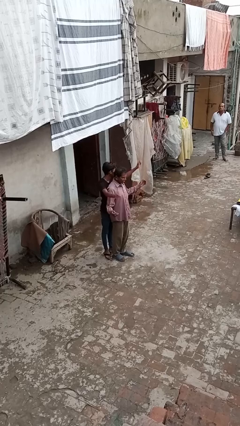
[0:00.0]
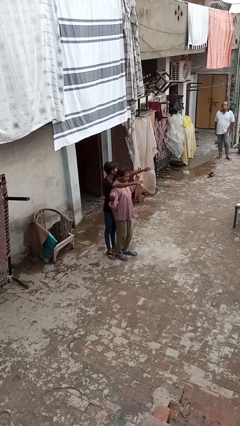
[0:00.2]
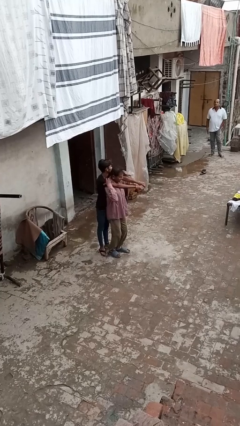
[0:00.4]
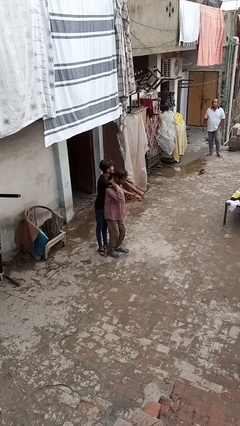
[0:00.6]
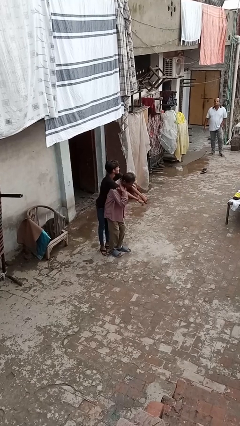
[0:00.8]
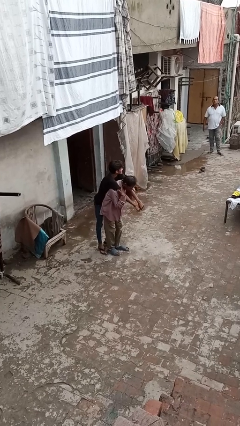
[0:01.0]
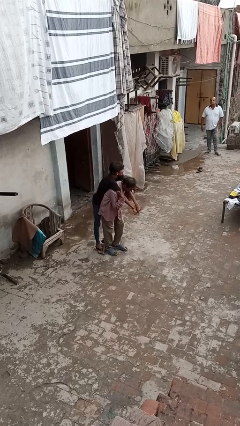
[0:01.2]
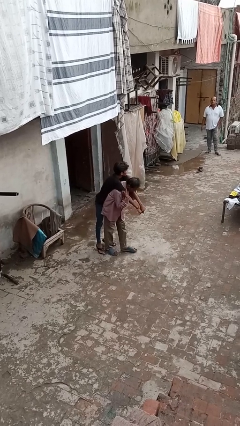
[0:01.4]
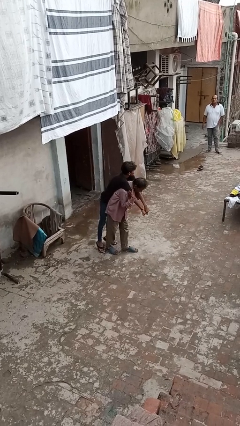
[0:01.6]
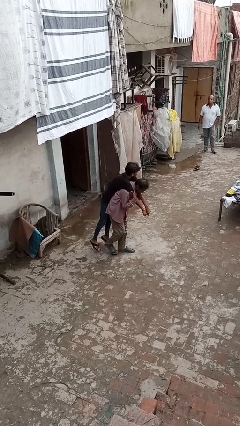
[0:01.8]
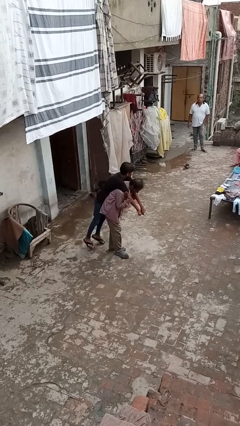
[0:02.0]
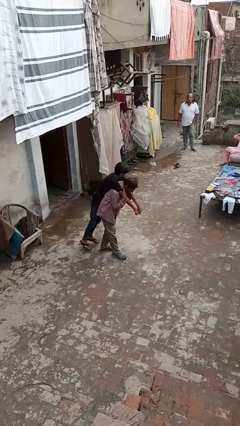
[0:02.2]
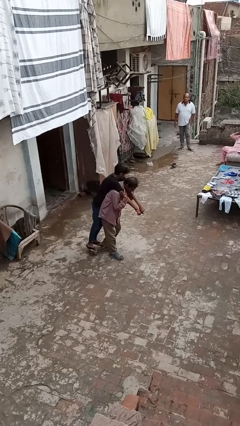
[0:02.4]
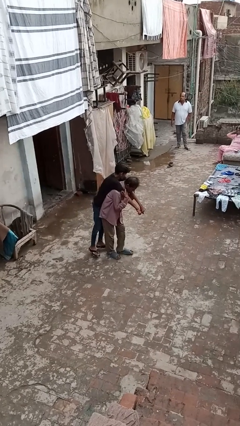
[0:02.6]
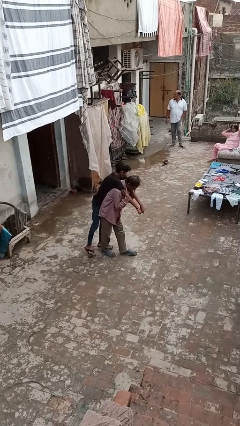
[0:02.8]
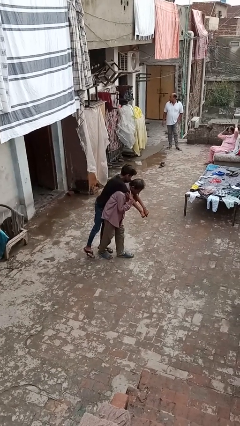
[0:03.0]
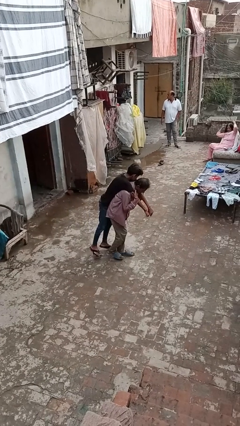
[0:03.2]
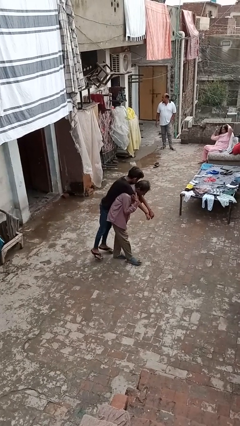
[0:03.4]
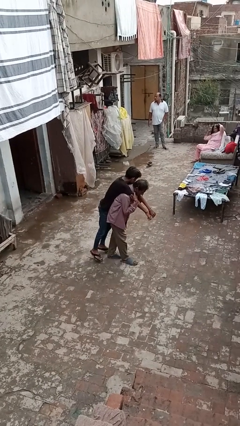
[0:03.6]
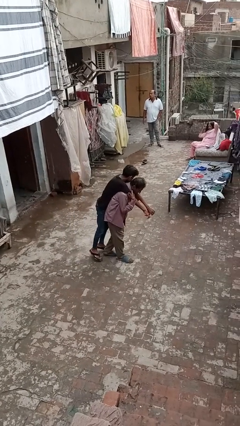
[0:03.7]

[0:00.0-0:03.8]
person carries person on back

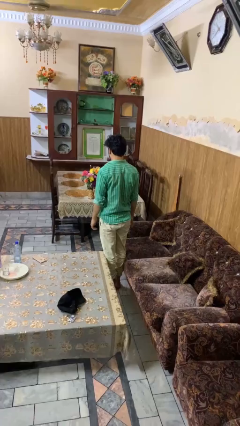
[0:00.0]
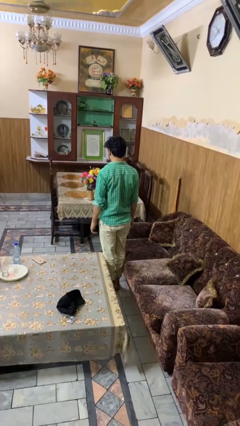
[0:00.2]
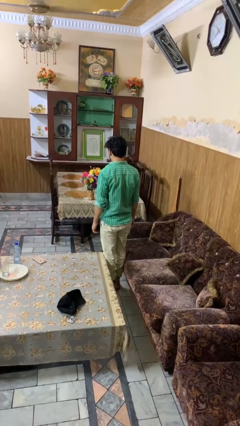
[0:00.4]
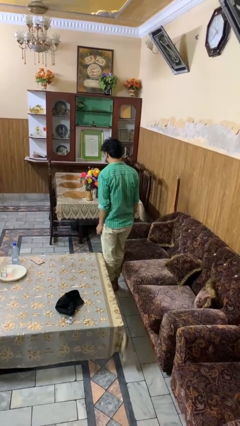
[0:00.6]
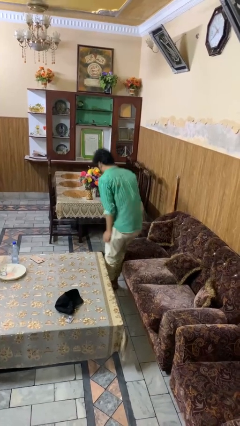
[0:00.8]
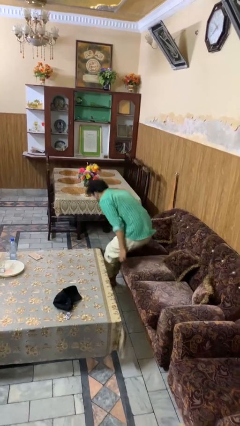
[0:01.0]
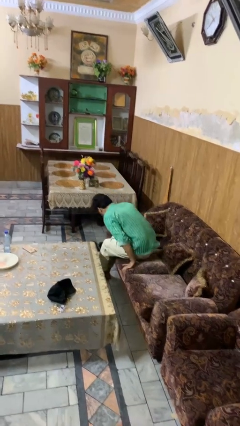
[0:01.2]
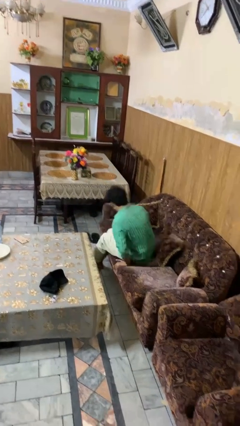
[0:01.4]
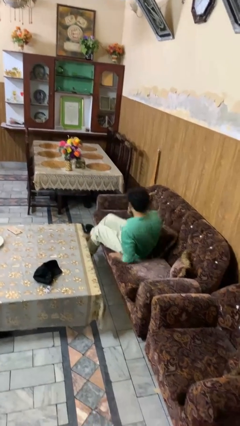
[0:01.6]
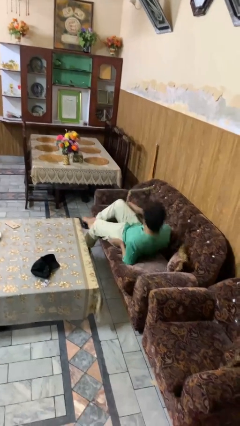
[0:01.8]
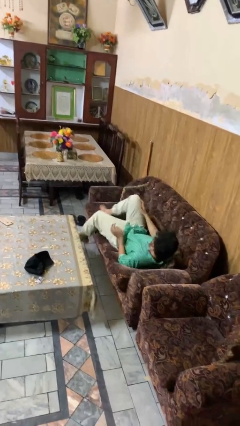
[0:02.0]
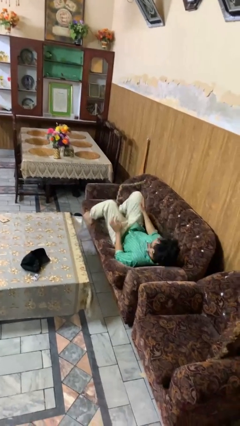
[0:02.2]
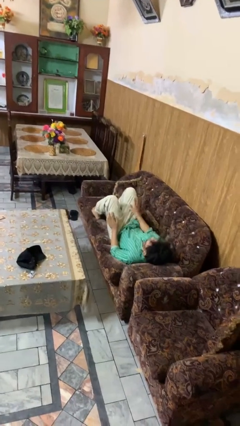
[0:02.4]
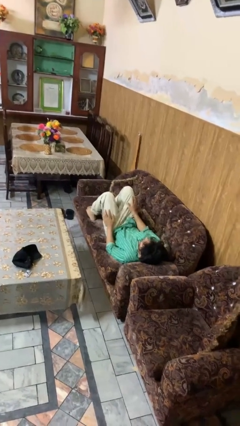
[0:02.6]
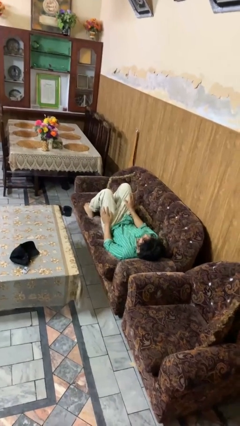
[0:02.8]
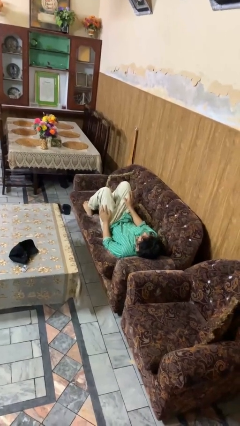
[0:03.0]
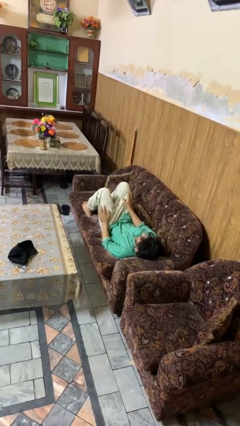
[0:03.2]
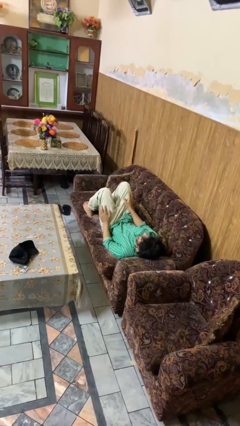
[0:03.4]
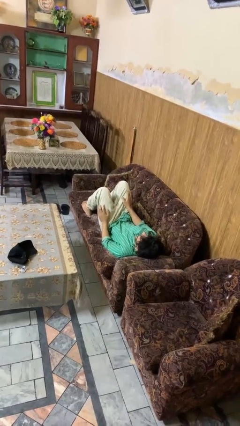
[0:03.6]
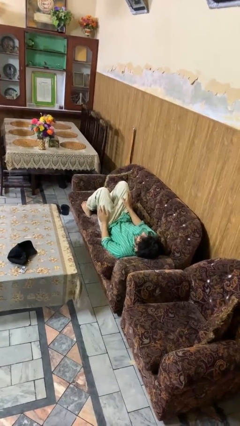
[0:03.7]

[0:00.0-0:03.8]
person lies down on couch

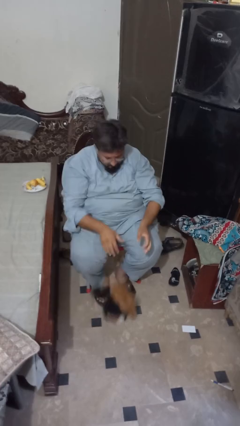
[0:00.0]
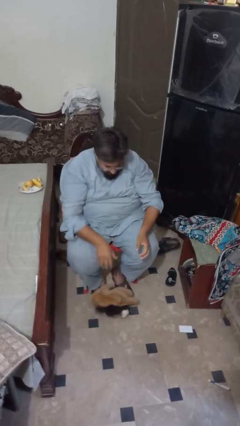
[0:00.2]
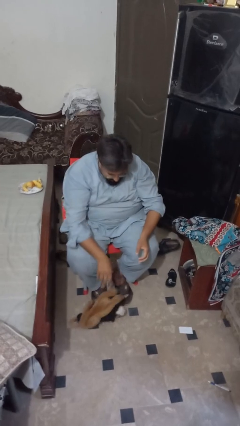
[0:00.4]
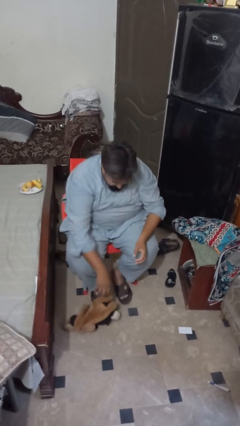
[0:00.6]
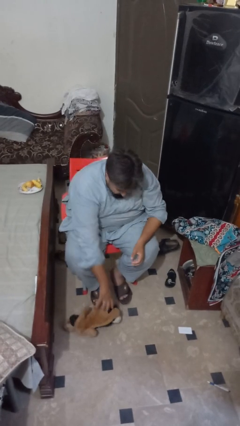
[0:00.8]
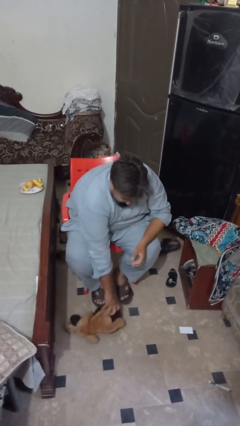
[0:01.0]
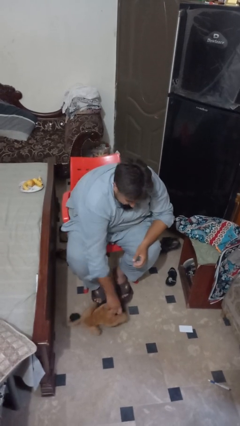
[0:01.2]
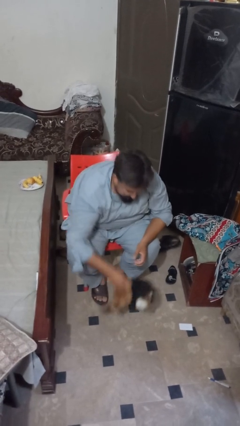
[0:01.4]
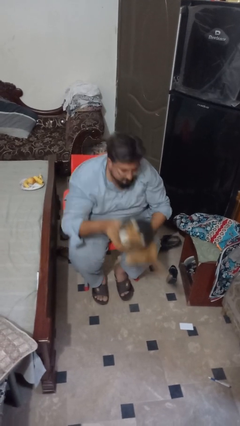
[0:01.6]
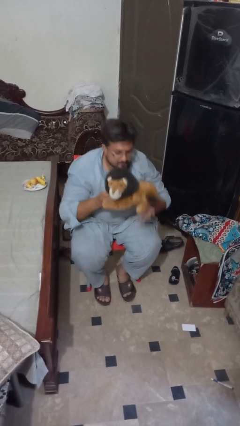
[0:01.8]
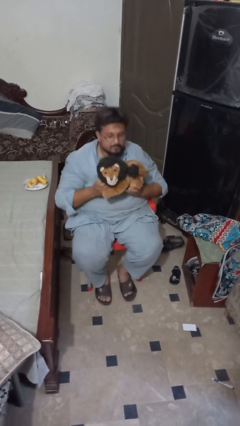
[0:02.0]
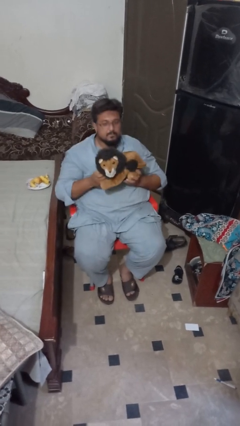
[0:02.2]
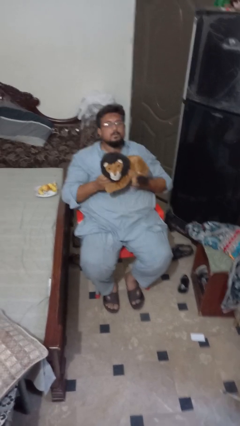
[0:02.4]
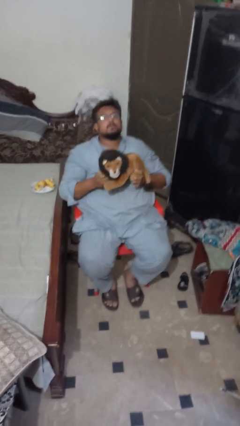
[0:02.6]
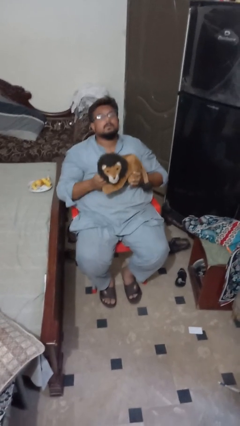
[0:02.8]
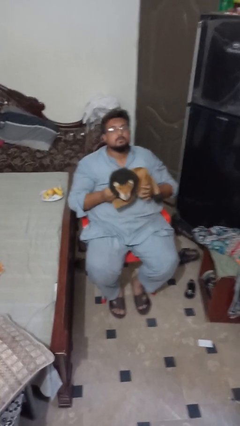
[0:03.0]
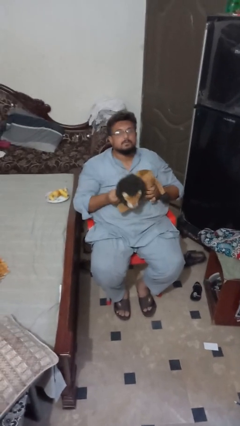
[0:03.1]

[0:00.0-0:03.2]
person picks up object from floor

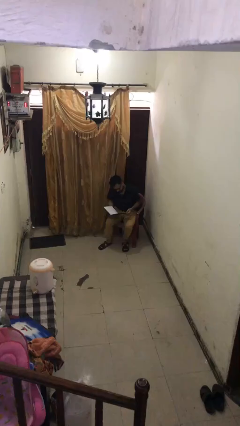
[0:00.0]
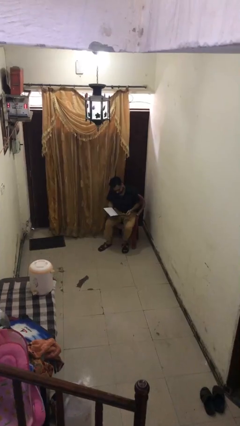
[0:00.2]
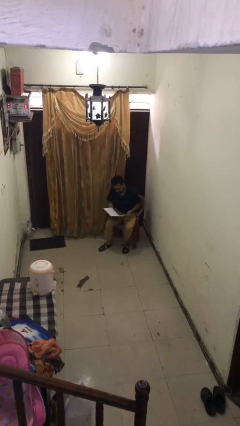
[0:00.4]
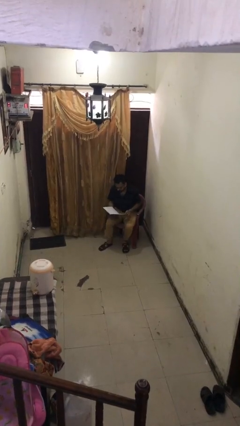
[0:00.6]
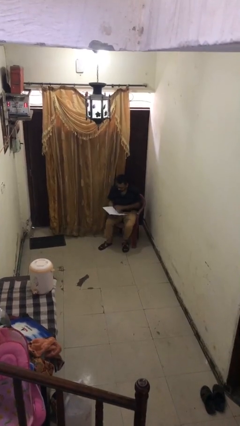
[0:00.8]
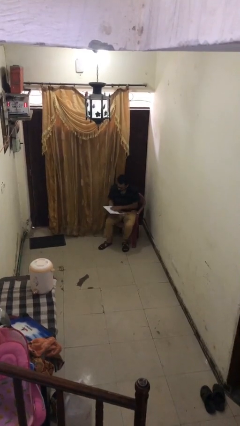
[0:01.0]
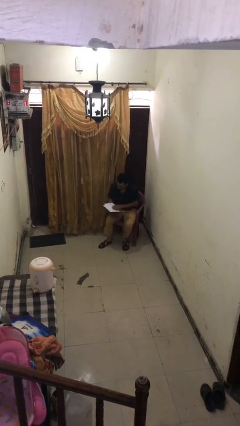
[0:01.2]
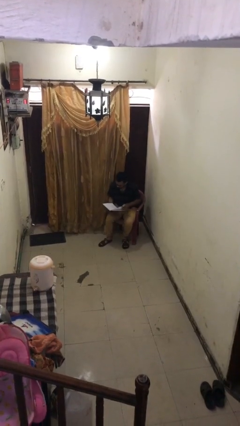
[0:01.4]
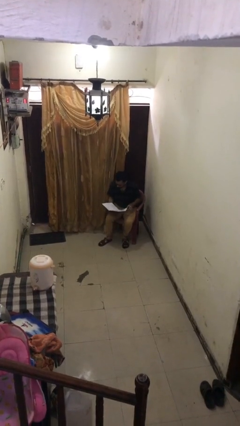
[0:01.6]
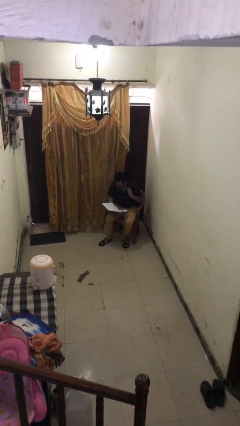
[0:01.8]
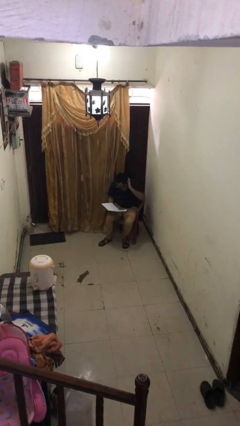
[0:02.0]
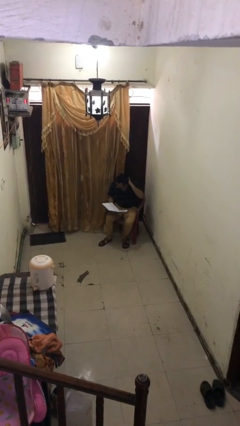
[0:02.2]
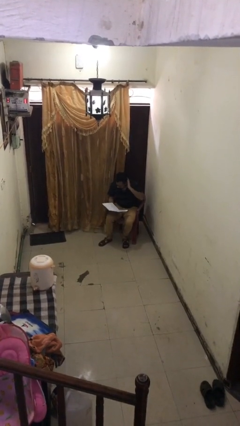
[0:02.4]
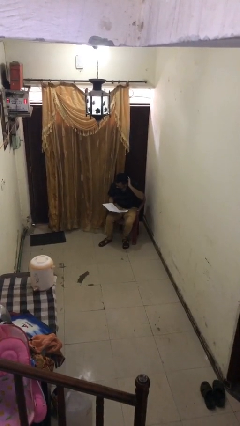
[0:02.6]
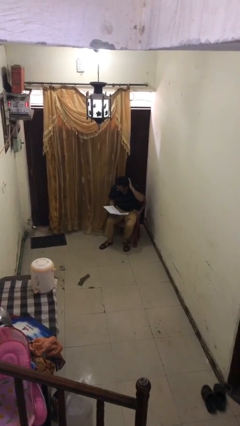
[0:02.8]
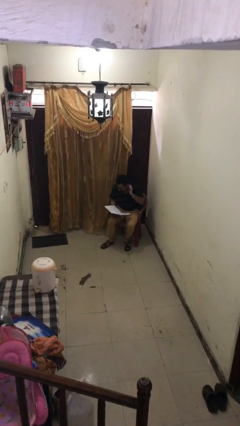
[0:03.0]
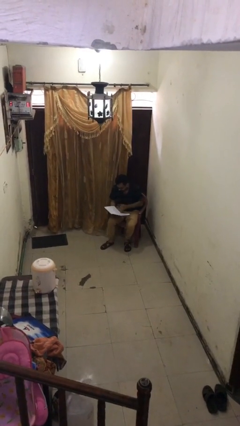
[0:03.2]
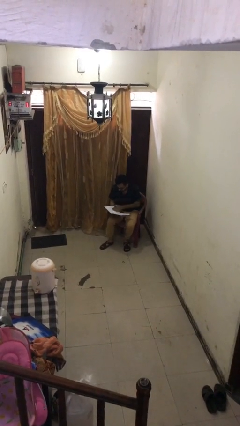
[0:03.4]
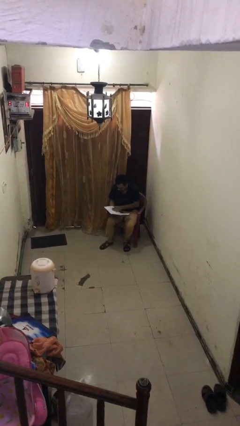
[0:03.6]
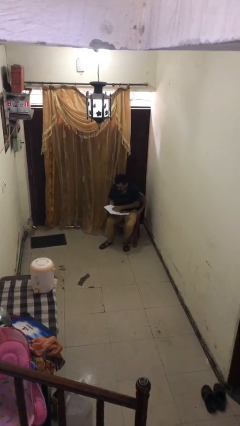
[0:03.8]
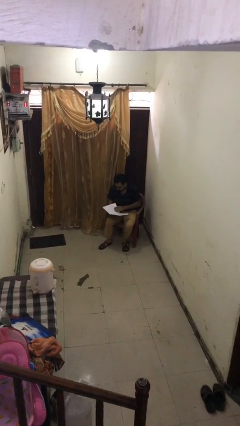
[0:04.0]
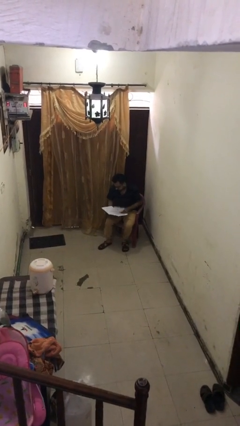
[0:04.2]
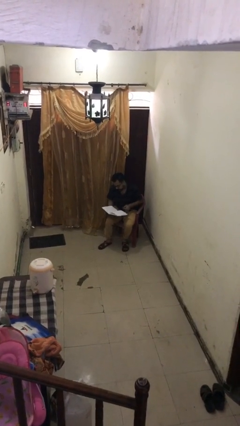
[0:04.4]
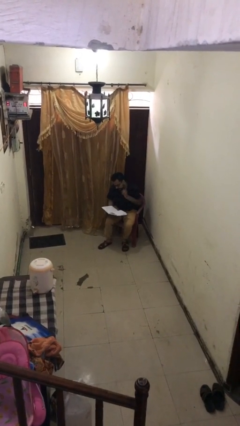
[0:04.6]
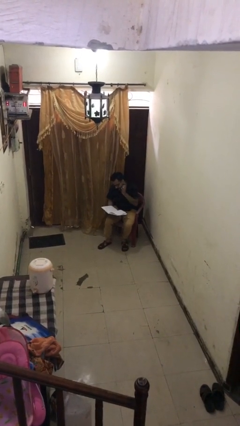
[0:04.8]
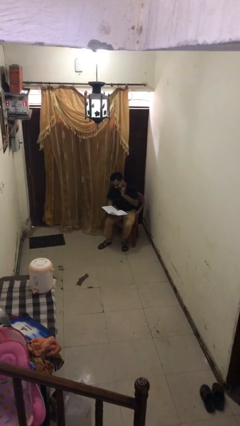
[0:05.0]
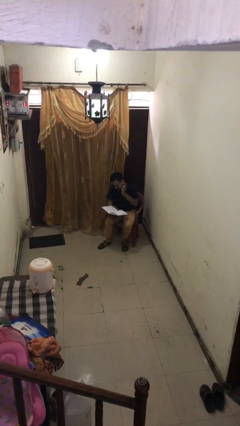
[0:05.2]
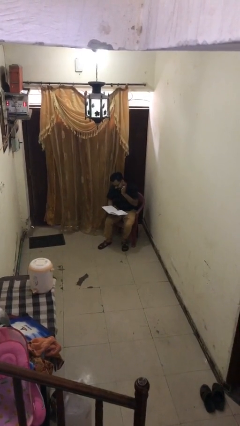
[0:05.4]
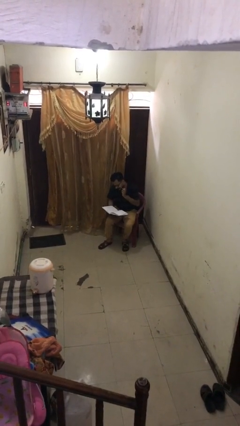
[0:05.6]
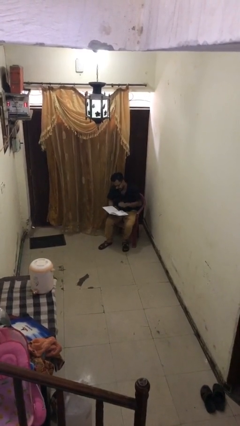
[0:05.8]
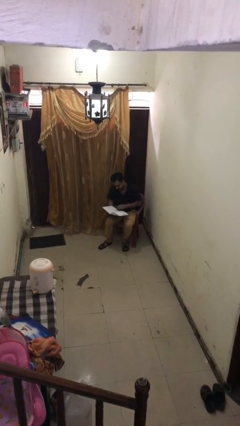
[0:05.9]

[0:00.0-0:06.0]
person reads document

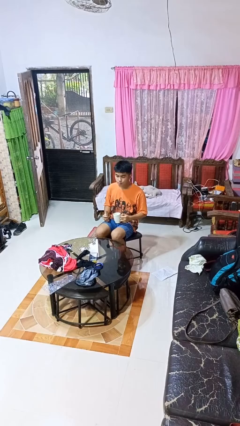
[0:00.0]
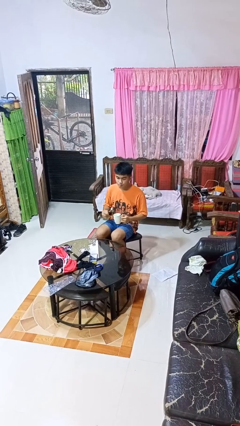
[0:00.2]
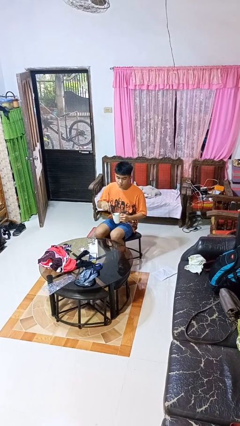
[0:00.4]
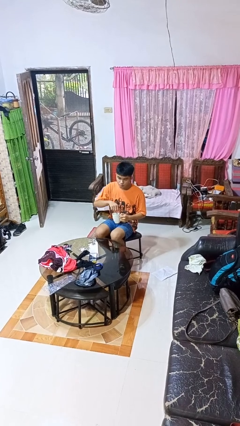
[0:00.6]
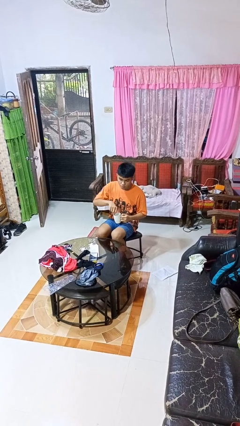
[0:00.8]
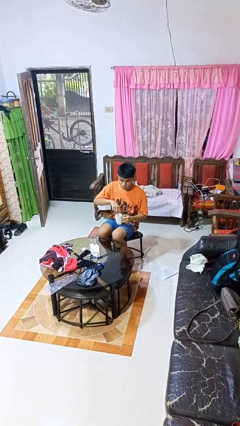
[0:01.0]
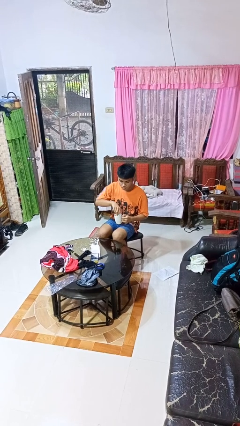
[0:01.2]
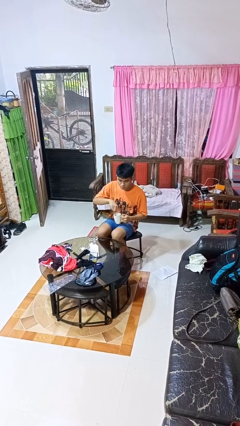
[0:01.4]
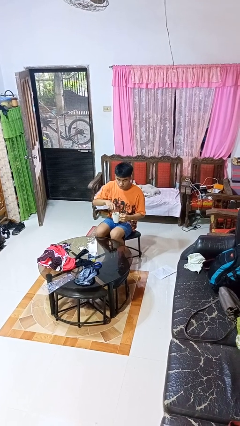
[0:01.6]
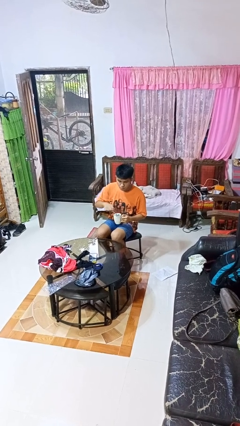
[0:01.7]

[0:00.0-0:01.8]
person stirs mug
